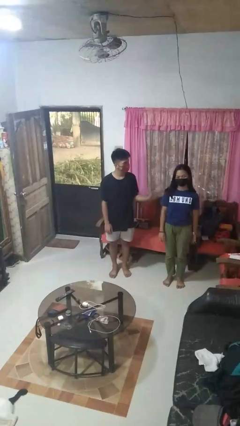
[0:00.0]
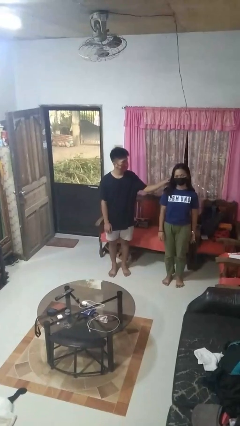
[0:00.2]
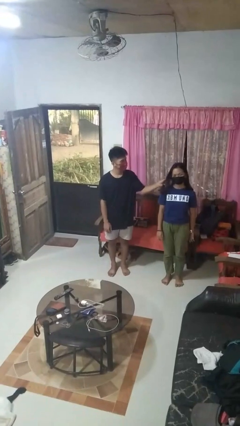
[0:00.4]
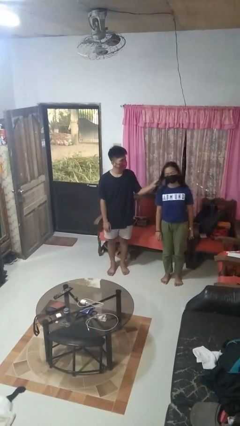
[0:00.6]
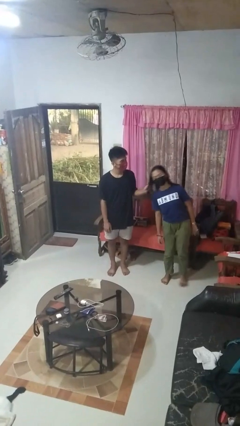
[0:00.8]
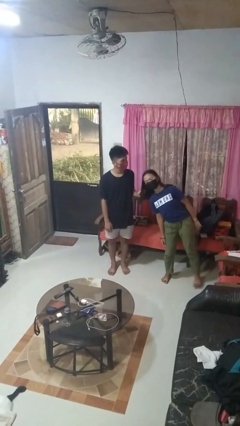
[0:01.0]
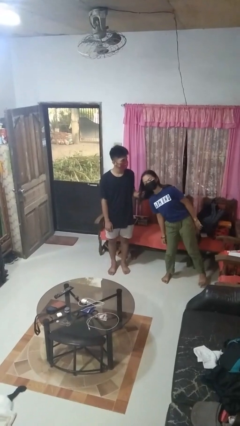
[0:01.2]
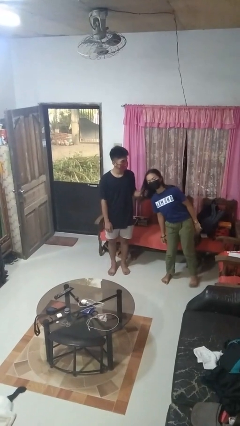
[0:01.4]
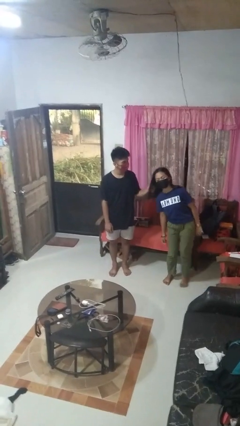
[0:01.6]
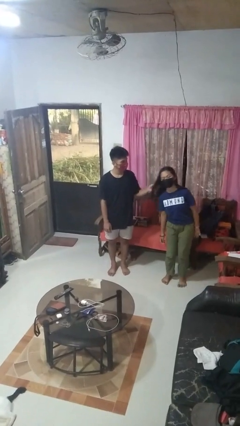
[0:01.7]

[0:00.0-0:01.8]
person grabs person by hair

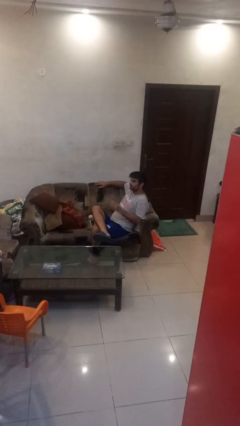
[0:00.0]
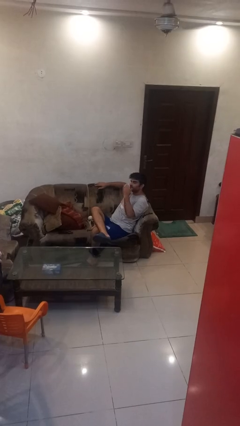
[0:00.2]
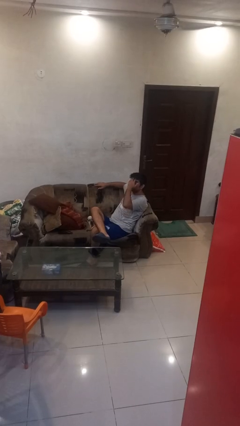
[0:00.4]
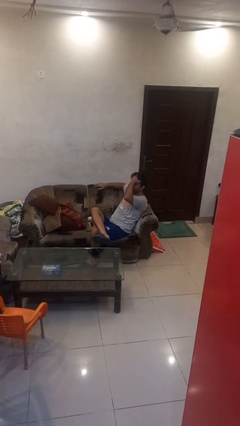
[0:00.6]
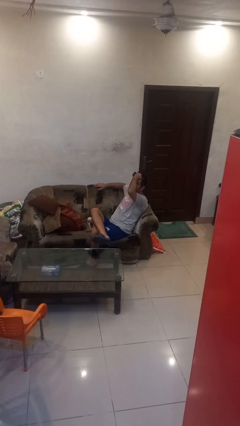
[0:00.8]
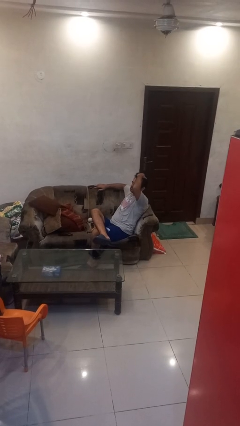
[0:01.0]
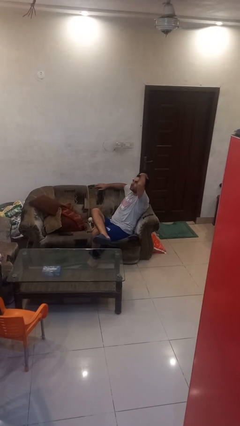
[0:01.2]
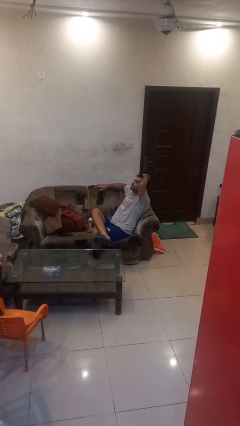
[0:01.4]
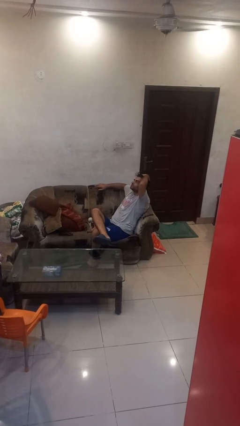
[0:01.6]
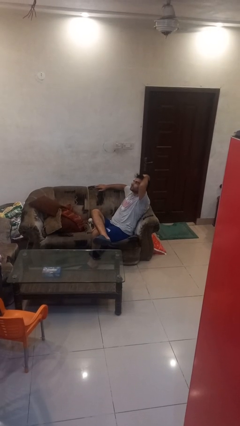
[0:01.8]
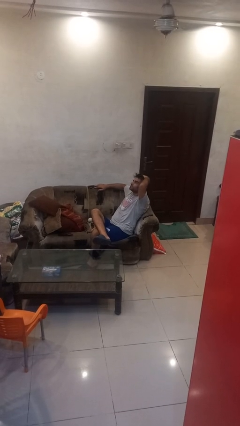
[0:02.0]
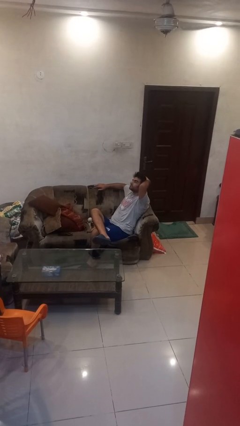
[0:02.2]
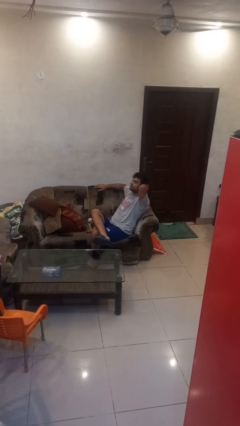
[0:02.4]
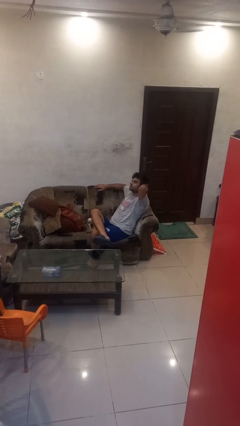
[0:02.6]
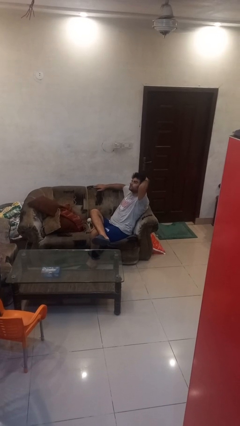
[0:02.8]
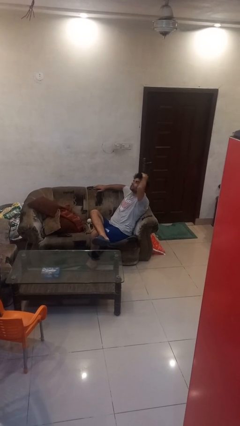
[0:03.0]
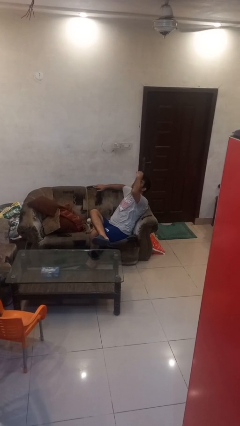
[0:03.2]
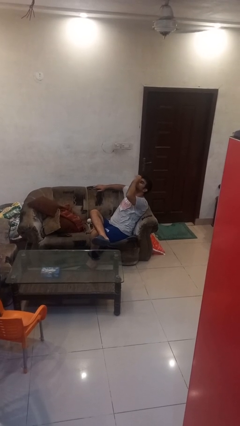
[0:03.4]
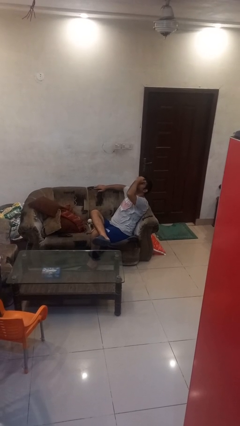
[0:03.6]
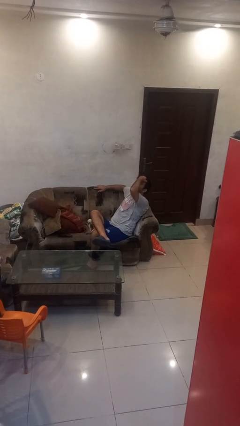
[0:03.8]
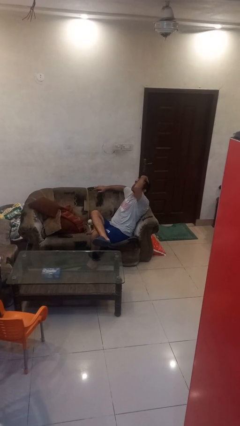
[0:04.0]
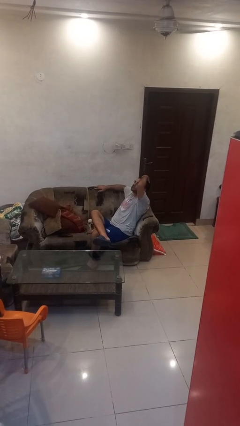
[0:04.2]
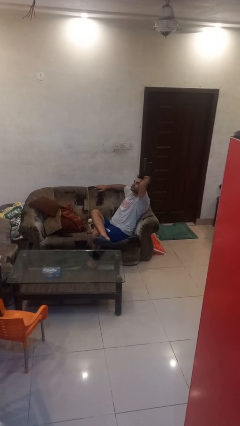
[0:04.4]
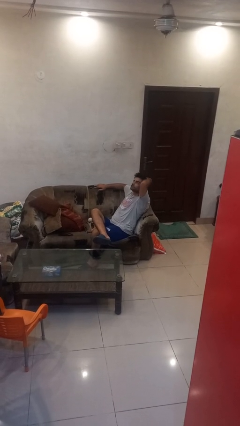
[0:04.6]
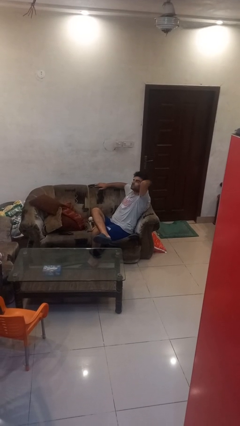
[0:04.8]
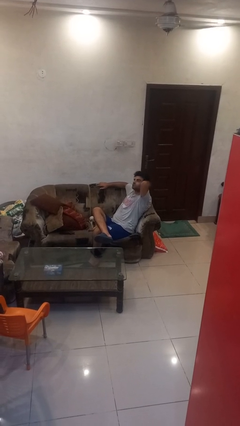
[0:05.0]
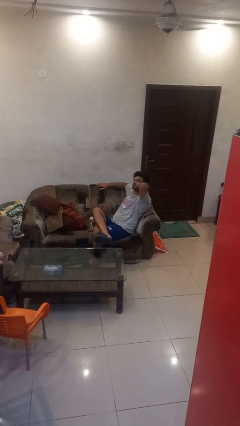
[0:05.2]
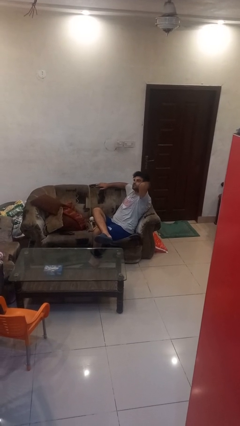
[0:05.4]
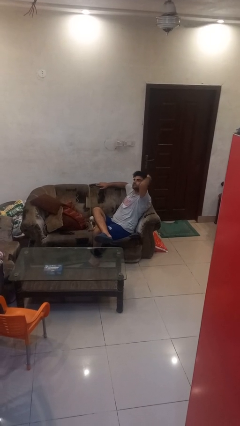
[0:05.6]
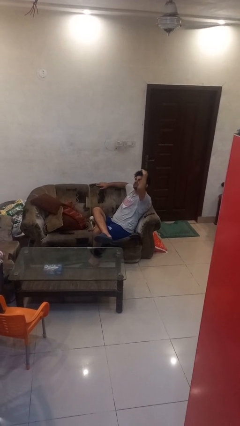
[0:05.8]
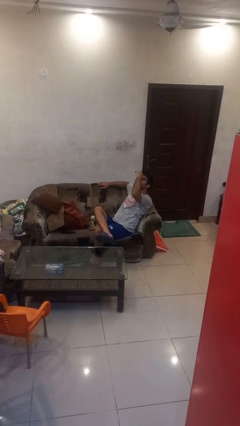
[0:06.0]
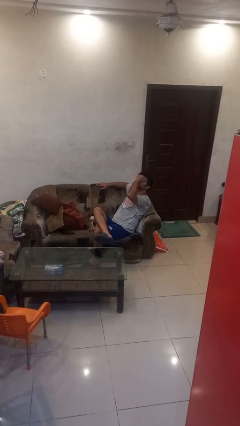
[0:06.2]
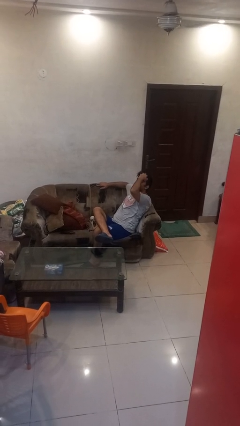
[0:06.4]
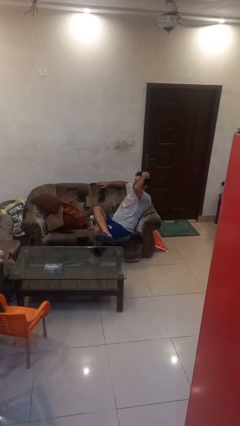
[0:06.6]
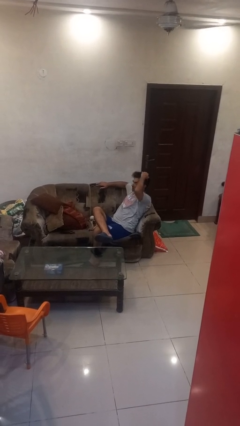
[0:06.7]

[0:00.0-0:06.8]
person strokes hair

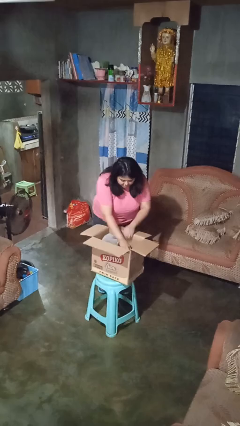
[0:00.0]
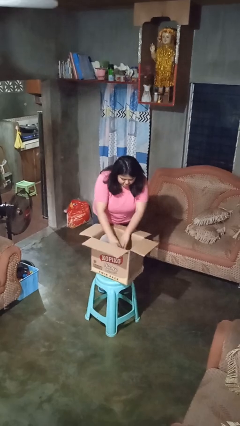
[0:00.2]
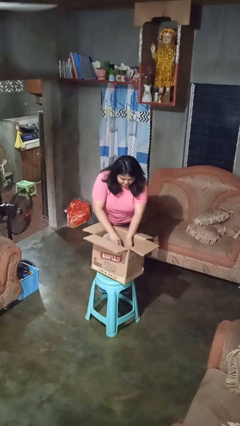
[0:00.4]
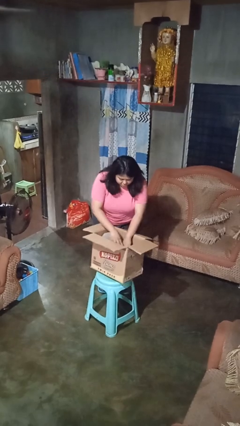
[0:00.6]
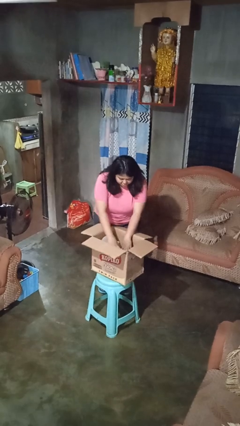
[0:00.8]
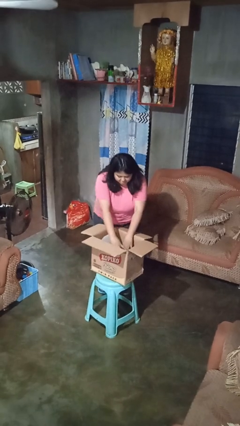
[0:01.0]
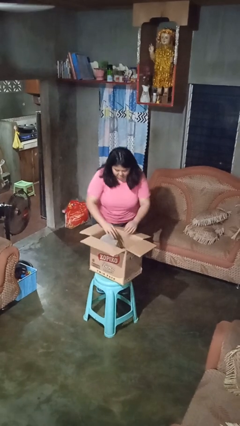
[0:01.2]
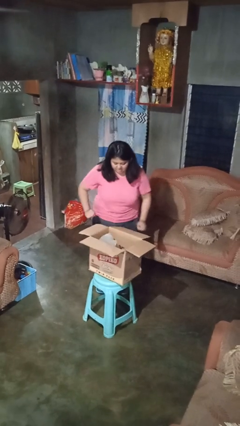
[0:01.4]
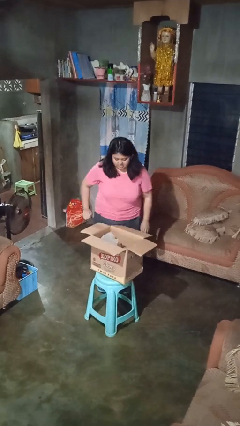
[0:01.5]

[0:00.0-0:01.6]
person searches in box

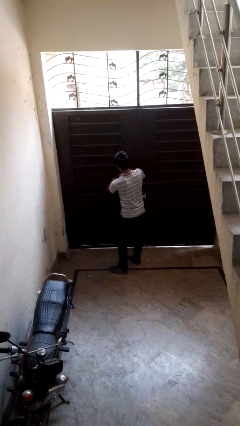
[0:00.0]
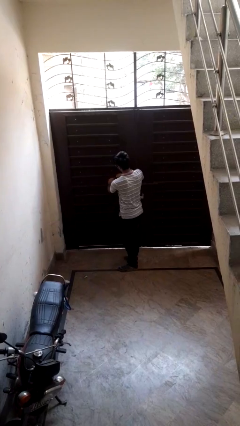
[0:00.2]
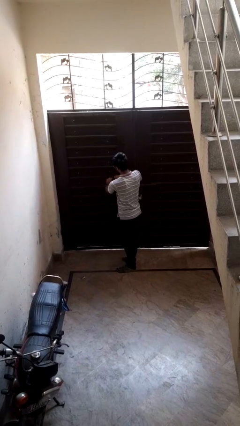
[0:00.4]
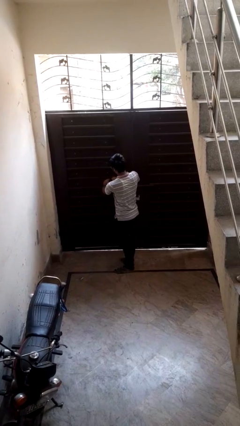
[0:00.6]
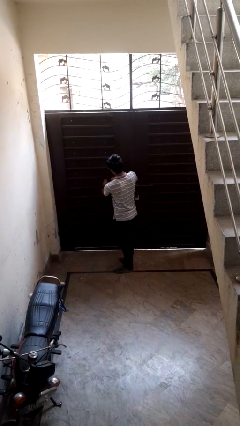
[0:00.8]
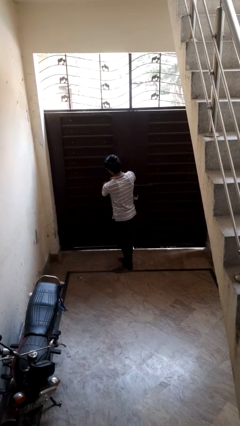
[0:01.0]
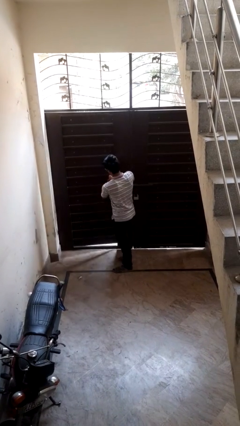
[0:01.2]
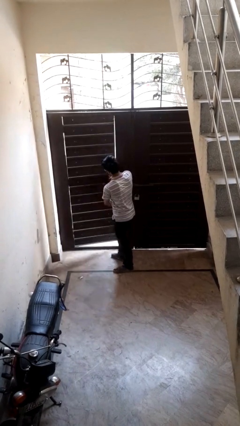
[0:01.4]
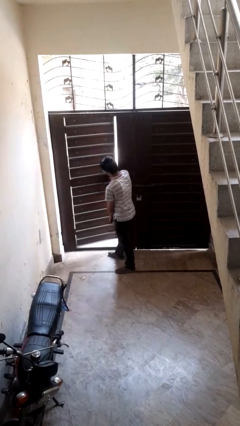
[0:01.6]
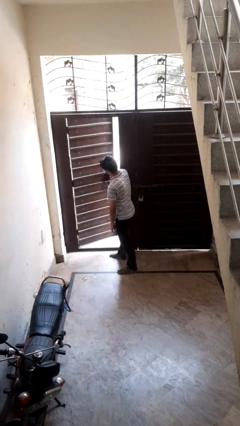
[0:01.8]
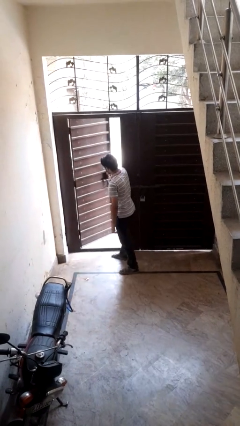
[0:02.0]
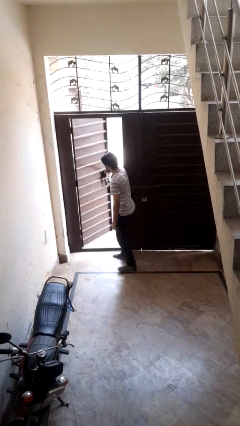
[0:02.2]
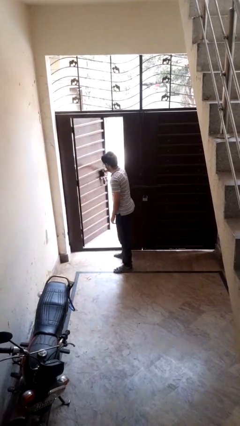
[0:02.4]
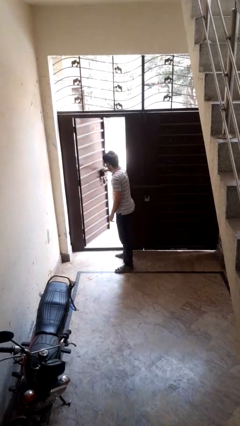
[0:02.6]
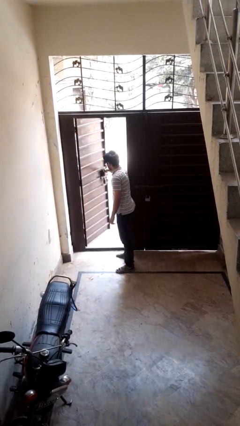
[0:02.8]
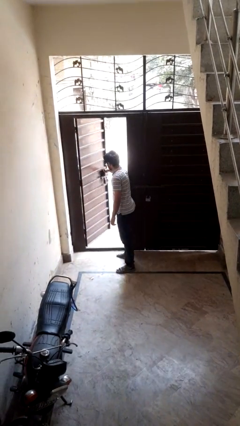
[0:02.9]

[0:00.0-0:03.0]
person opens facility door

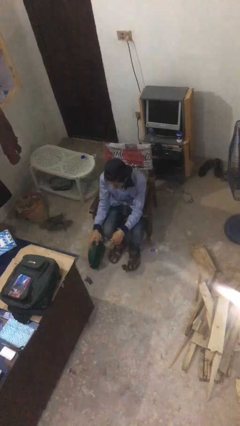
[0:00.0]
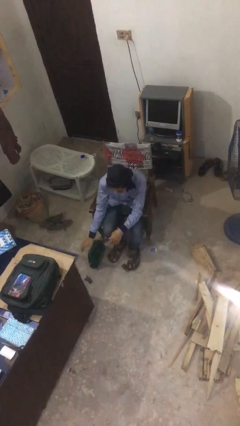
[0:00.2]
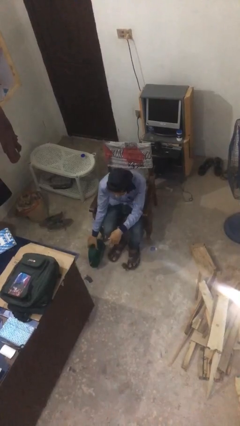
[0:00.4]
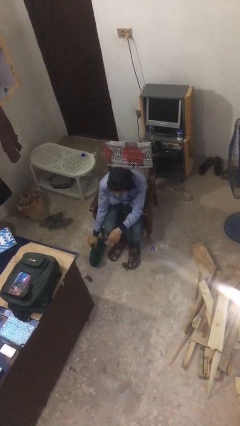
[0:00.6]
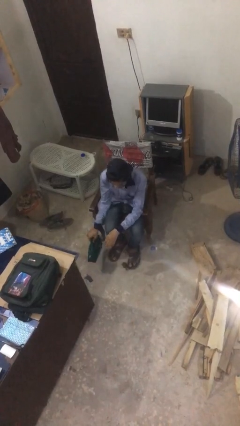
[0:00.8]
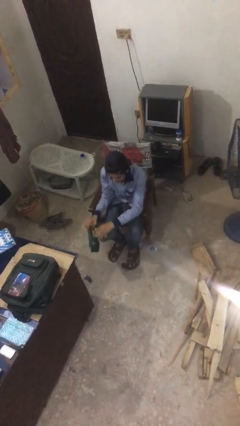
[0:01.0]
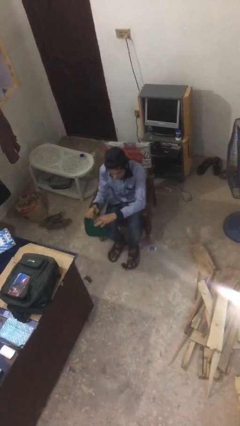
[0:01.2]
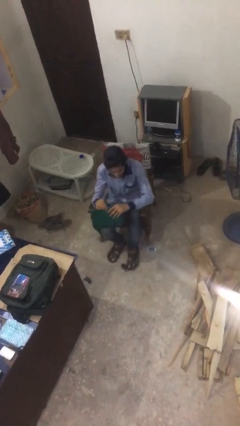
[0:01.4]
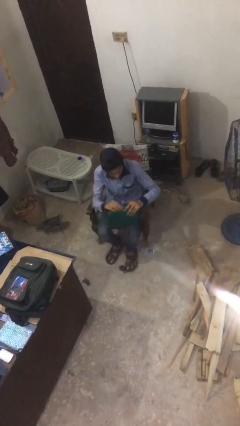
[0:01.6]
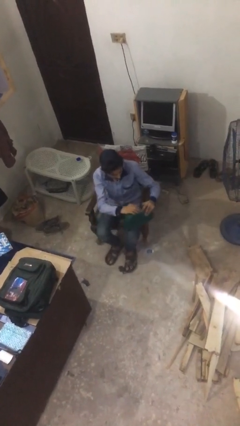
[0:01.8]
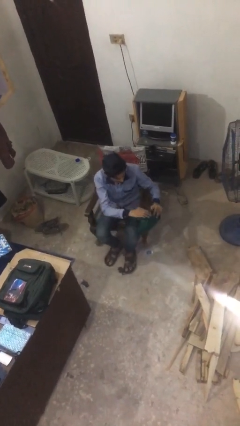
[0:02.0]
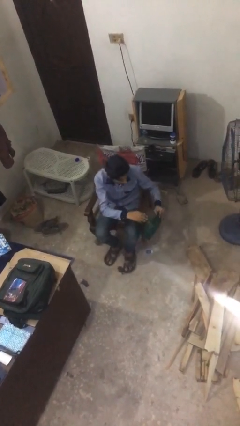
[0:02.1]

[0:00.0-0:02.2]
person picks up object from floor

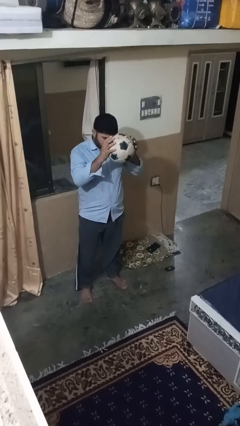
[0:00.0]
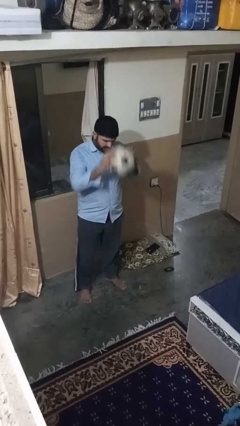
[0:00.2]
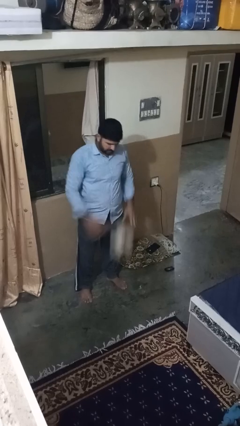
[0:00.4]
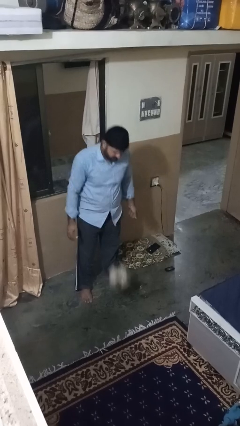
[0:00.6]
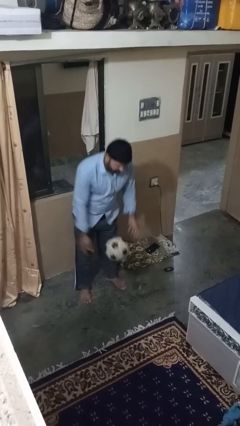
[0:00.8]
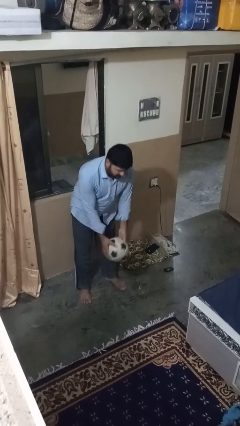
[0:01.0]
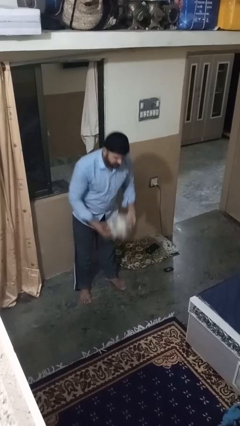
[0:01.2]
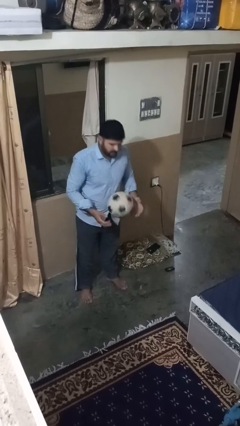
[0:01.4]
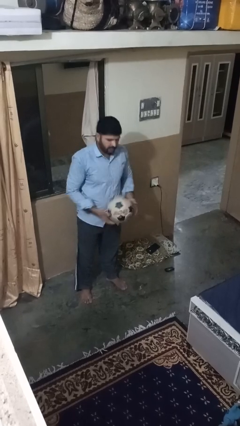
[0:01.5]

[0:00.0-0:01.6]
person bounces ball on floor

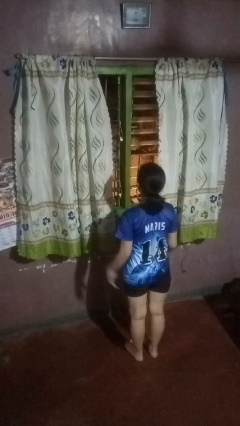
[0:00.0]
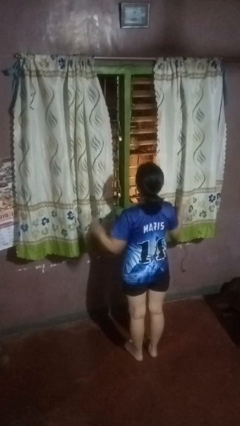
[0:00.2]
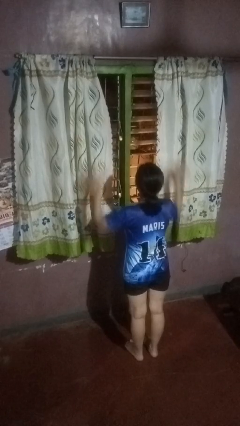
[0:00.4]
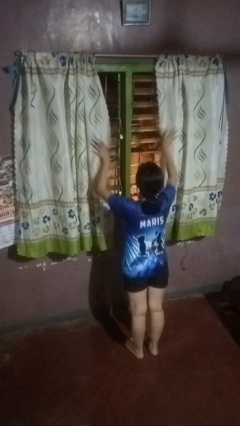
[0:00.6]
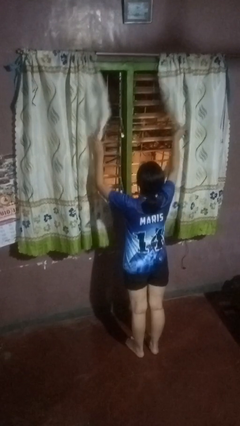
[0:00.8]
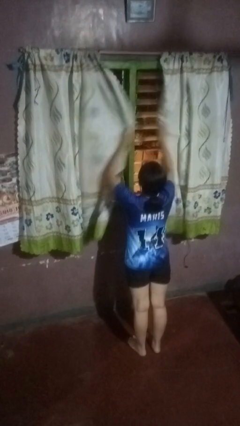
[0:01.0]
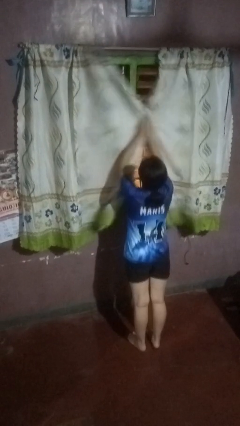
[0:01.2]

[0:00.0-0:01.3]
person closes curtains
